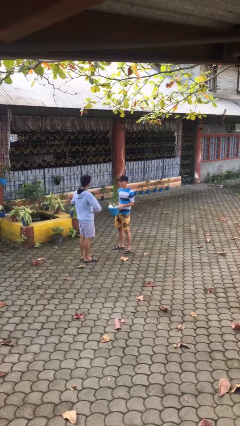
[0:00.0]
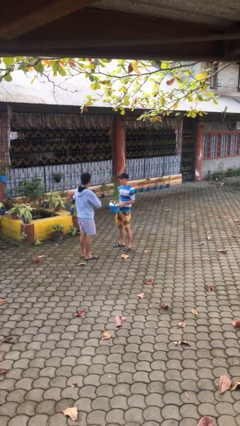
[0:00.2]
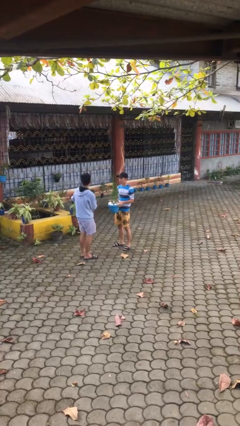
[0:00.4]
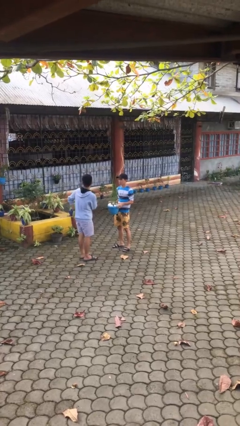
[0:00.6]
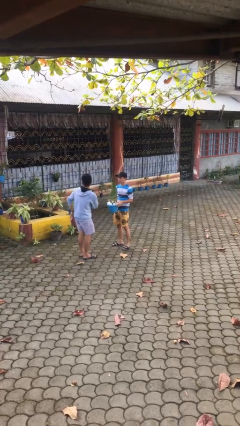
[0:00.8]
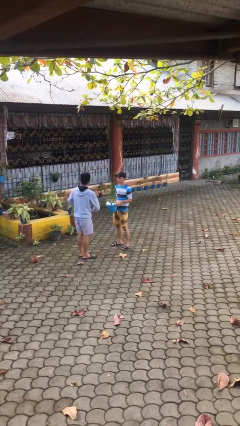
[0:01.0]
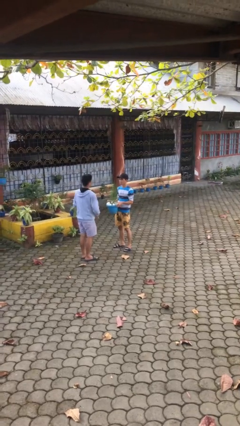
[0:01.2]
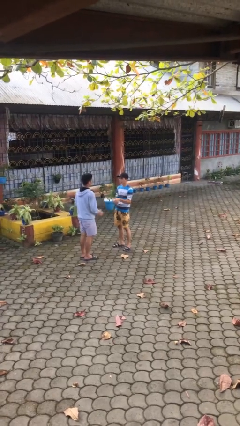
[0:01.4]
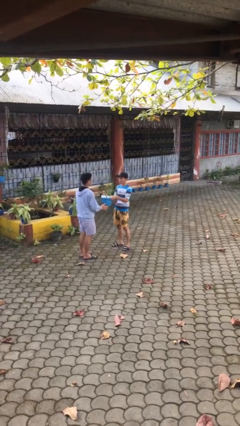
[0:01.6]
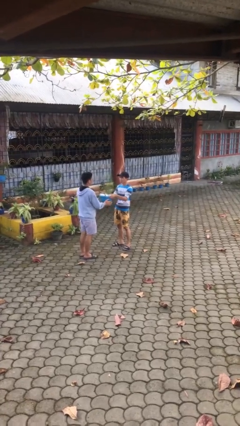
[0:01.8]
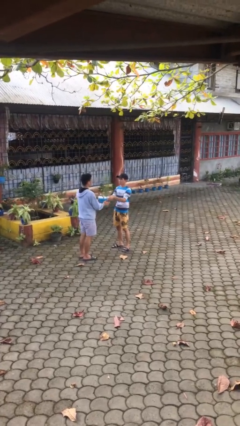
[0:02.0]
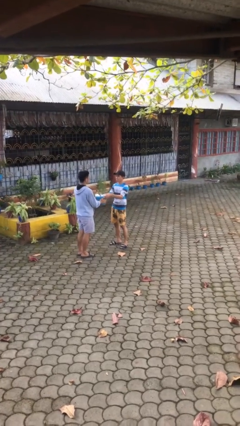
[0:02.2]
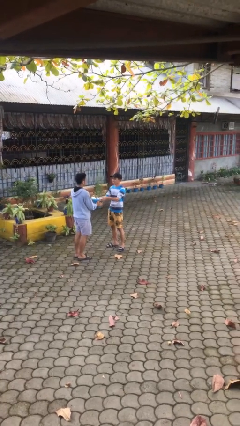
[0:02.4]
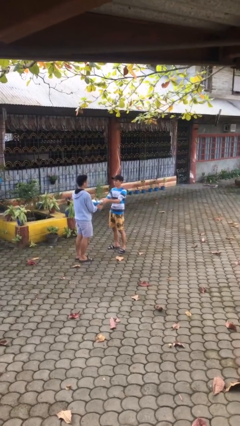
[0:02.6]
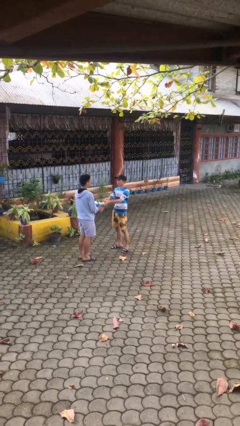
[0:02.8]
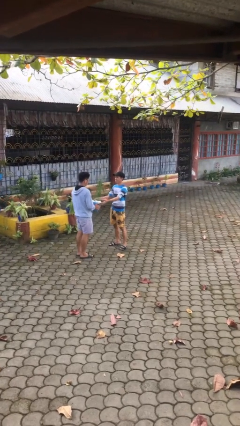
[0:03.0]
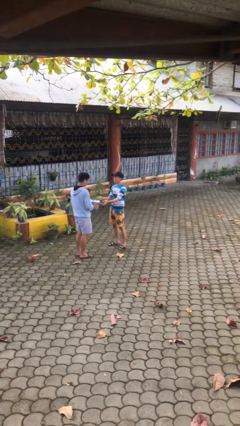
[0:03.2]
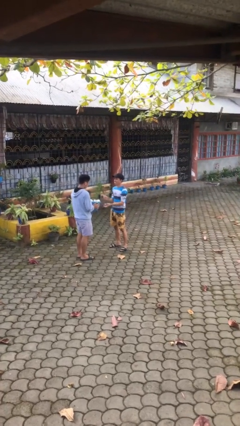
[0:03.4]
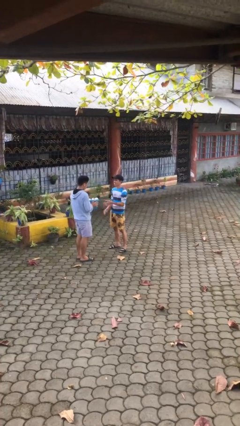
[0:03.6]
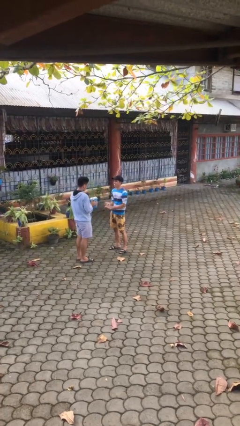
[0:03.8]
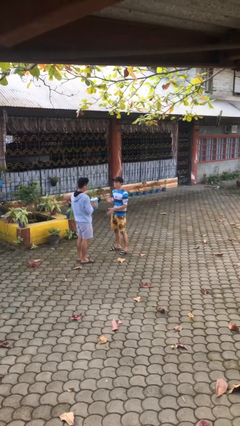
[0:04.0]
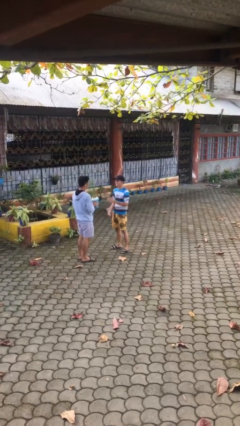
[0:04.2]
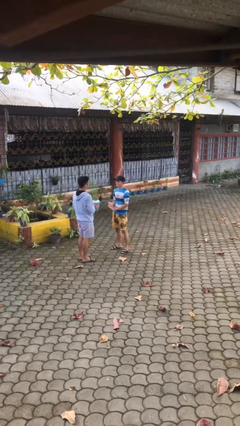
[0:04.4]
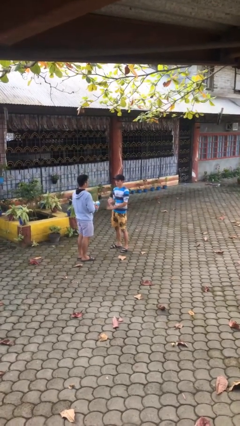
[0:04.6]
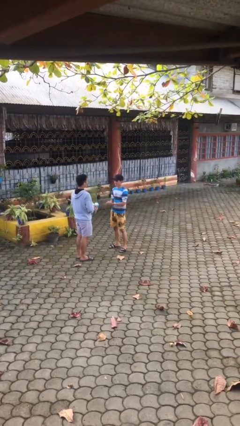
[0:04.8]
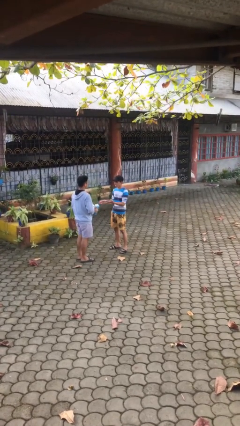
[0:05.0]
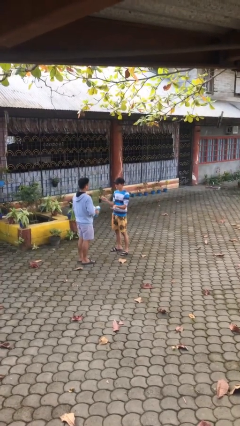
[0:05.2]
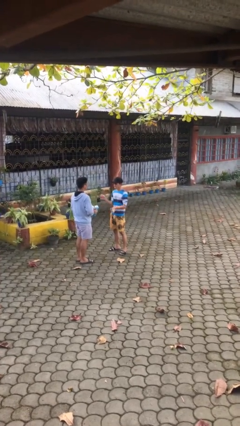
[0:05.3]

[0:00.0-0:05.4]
person transfers object to person

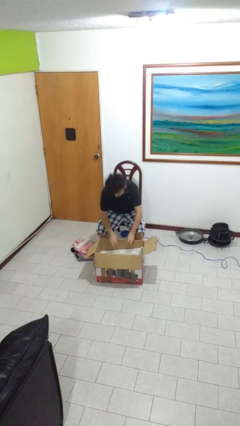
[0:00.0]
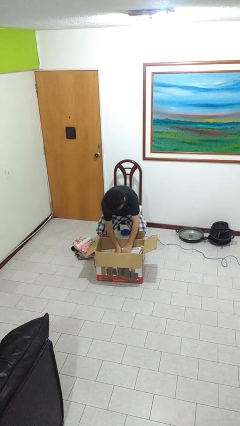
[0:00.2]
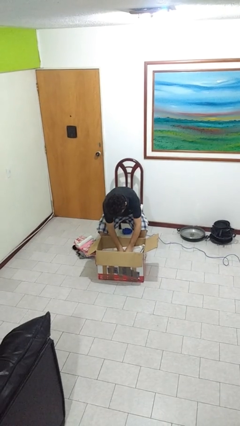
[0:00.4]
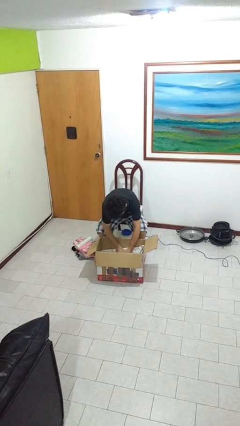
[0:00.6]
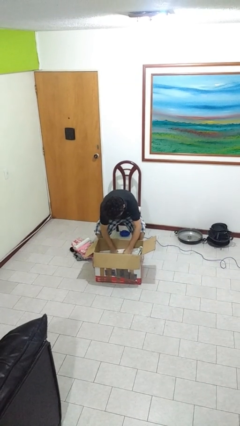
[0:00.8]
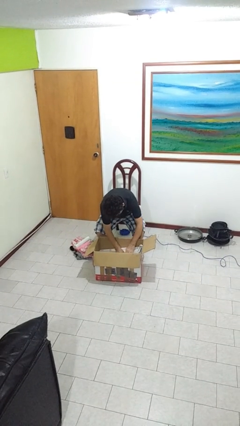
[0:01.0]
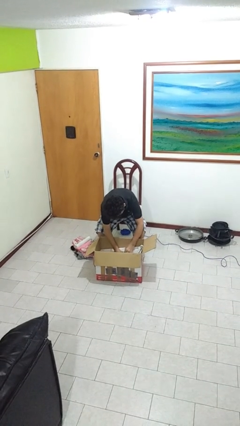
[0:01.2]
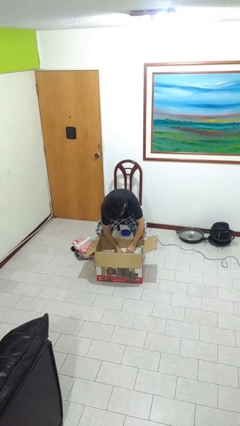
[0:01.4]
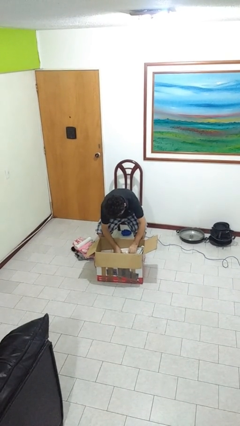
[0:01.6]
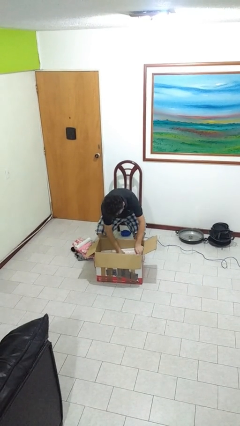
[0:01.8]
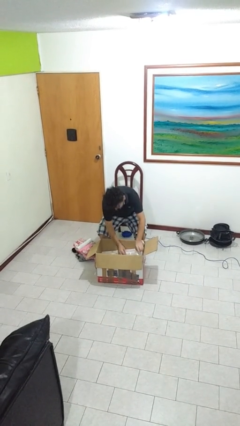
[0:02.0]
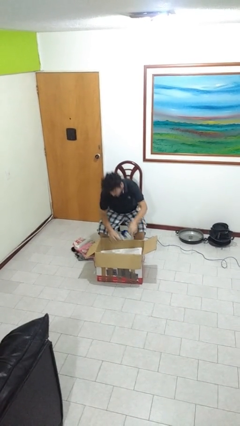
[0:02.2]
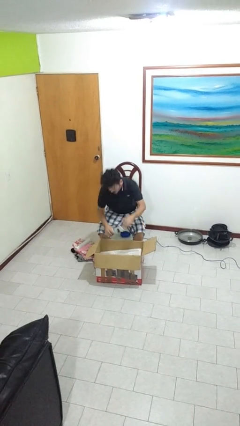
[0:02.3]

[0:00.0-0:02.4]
person searches in box

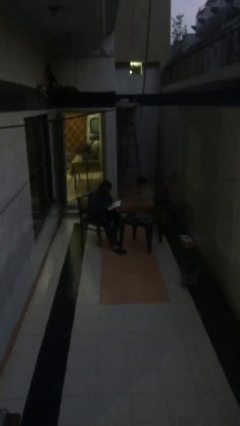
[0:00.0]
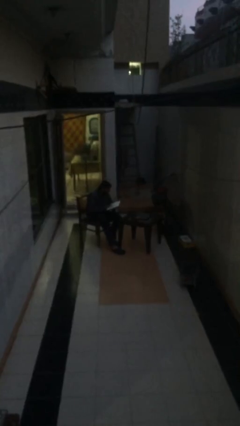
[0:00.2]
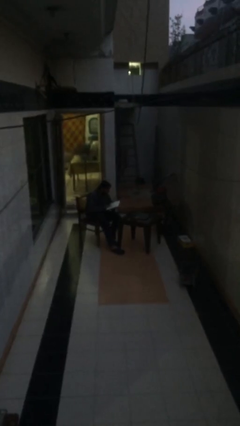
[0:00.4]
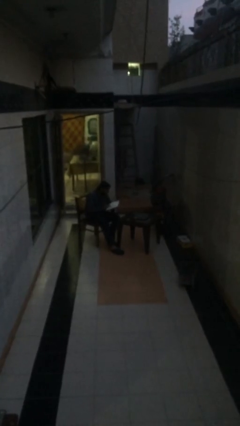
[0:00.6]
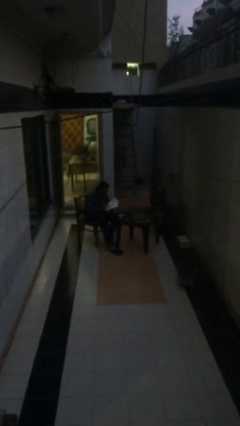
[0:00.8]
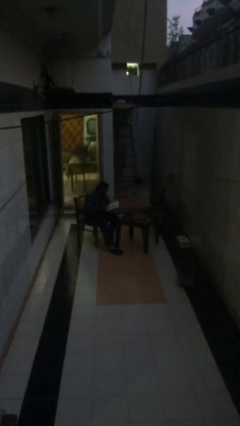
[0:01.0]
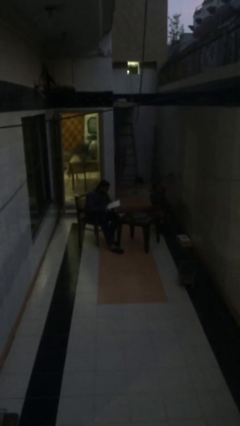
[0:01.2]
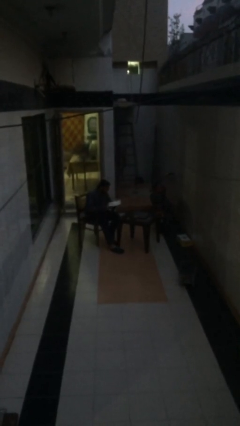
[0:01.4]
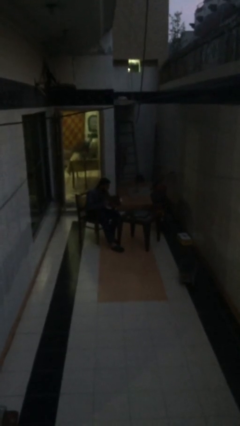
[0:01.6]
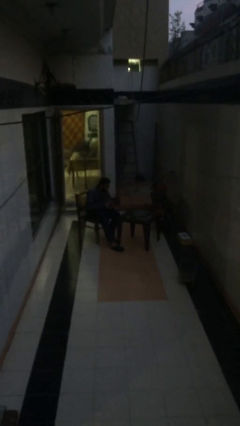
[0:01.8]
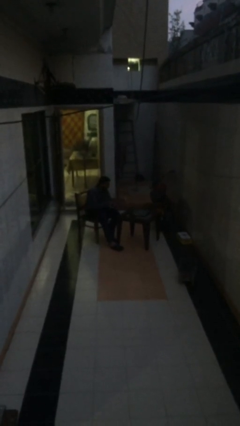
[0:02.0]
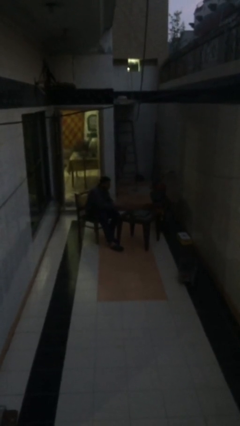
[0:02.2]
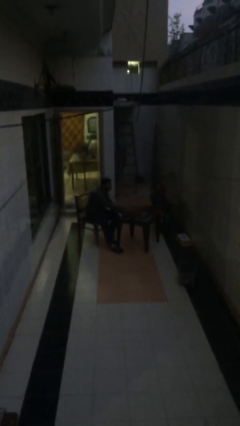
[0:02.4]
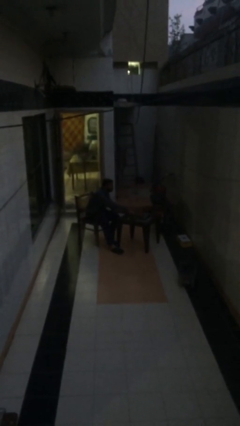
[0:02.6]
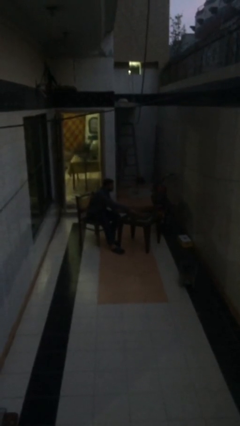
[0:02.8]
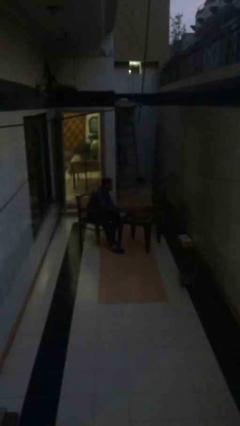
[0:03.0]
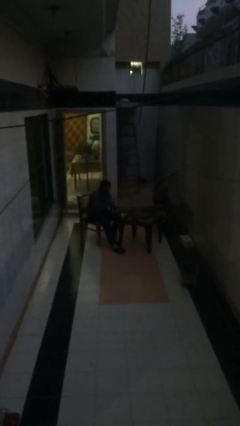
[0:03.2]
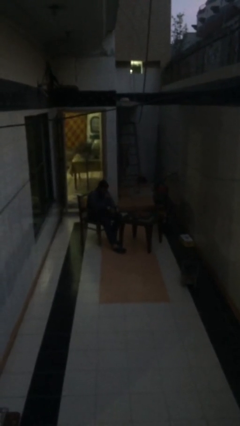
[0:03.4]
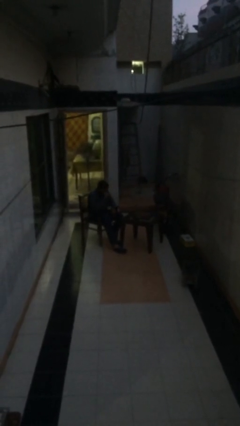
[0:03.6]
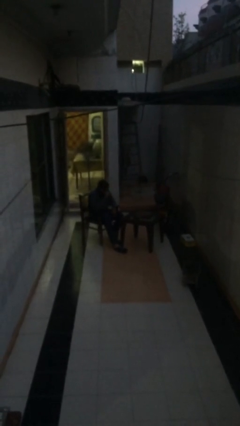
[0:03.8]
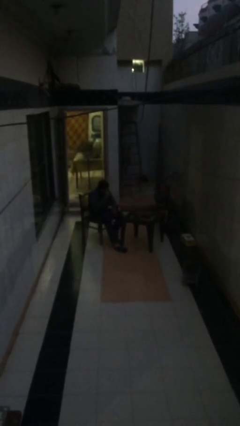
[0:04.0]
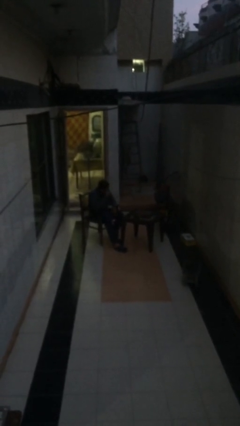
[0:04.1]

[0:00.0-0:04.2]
person puts down object on table

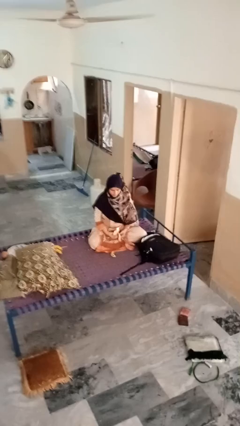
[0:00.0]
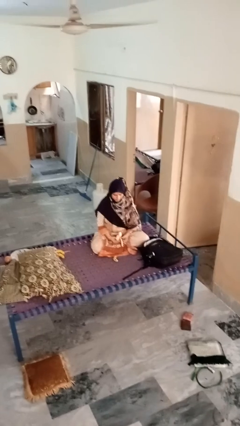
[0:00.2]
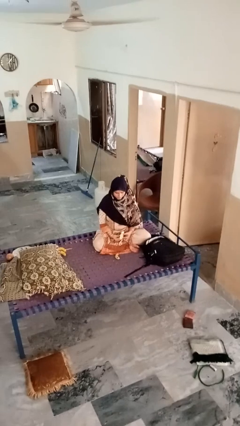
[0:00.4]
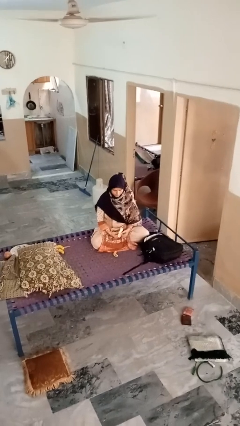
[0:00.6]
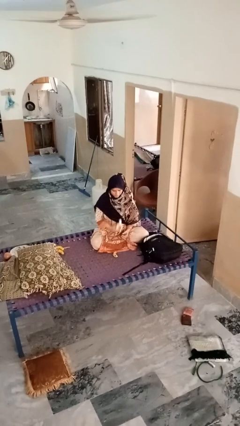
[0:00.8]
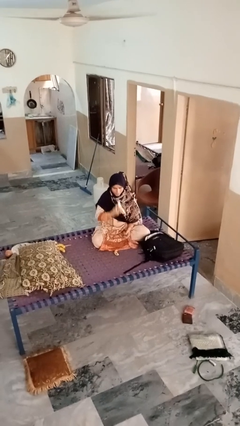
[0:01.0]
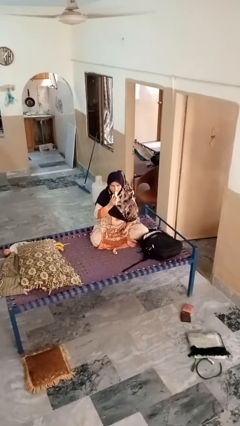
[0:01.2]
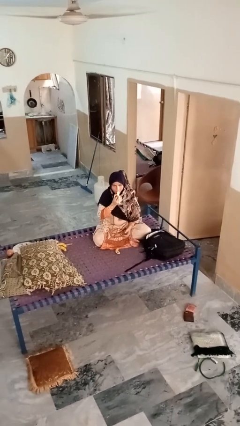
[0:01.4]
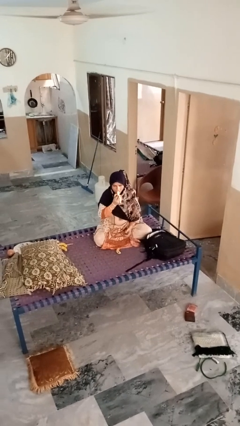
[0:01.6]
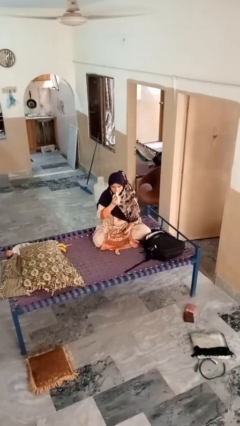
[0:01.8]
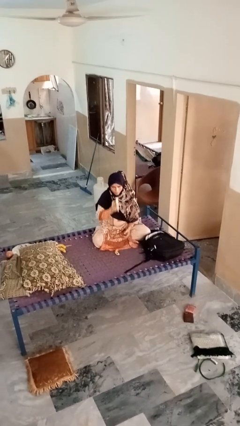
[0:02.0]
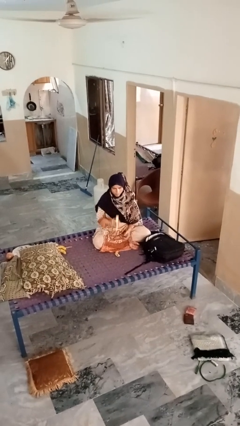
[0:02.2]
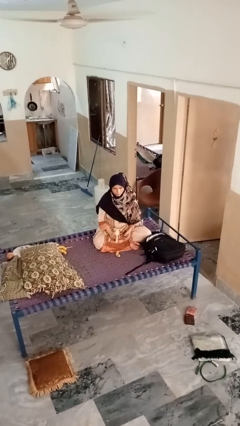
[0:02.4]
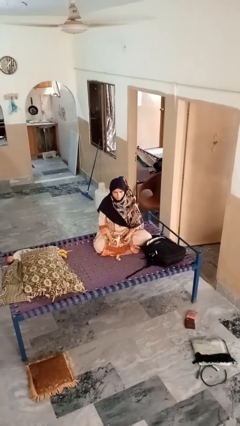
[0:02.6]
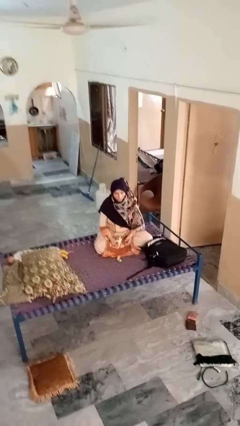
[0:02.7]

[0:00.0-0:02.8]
person eats banana

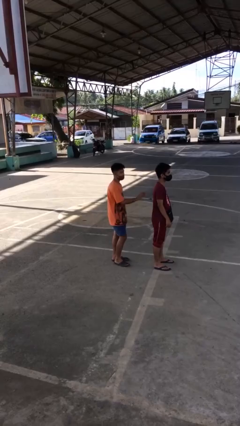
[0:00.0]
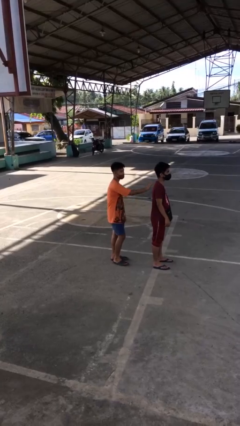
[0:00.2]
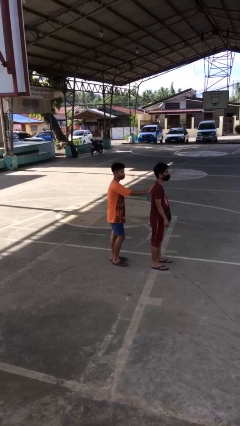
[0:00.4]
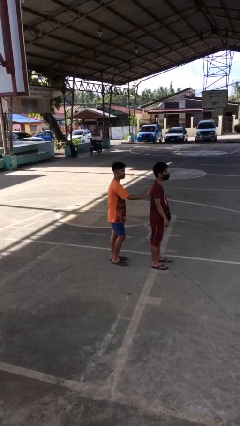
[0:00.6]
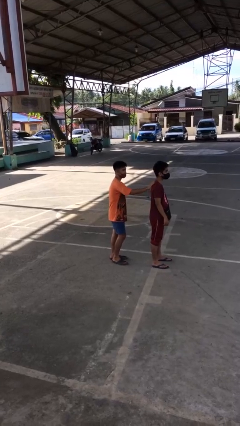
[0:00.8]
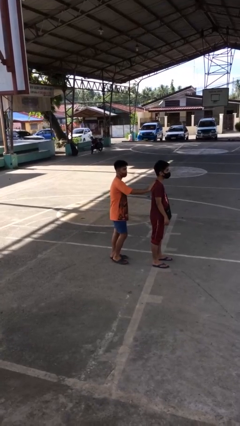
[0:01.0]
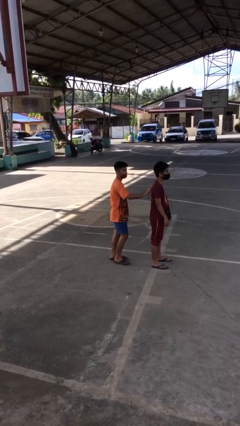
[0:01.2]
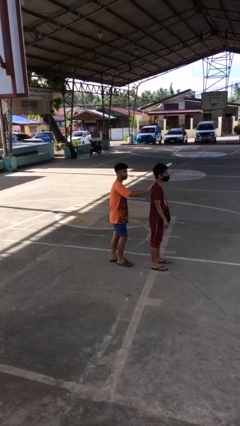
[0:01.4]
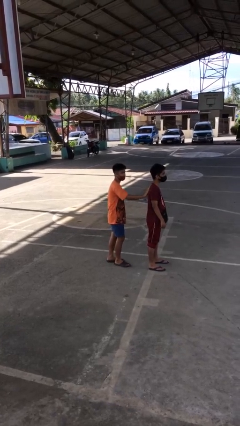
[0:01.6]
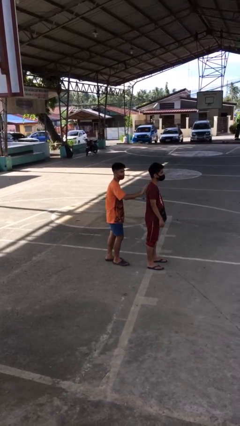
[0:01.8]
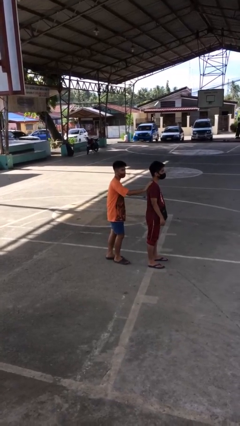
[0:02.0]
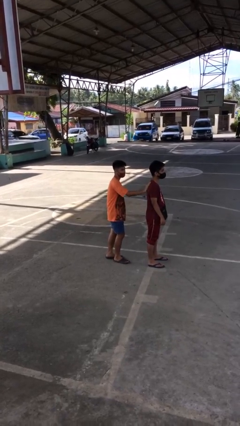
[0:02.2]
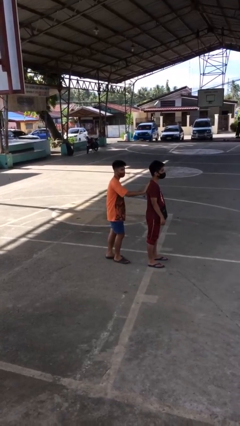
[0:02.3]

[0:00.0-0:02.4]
person touches back of person

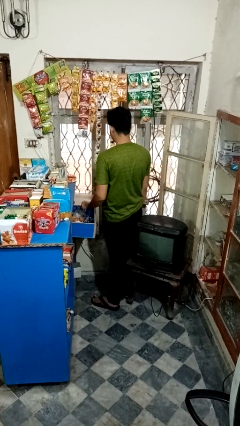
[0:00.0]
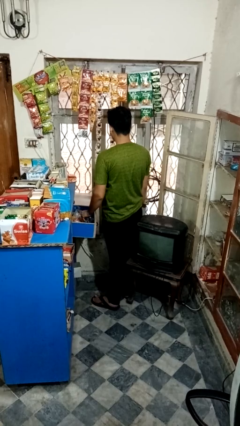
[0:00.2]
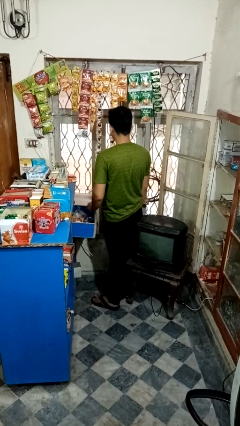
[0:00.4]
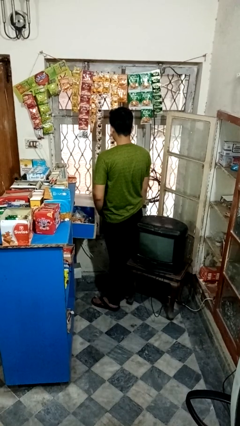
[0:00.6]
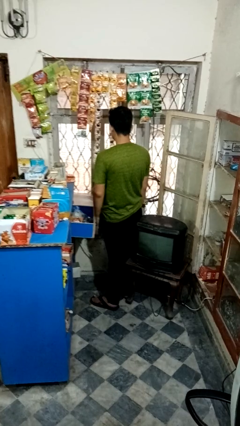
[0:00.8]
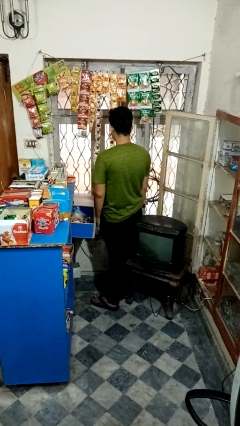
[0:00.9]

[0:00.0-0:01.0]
person puts object into kitchen drawer
